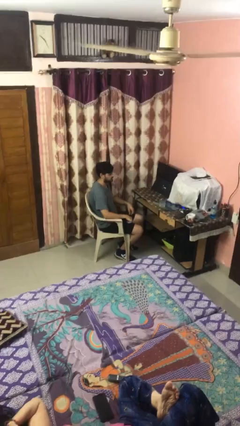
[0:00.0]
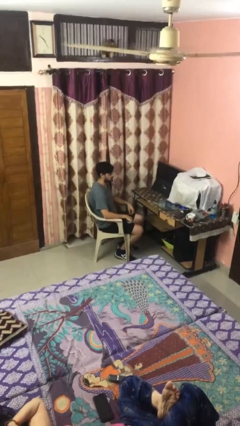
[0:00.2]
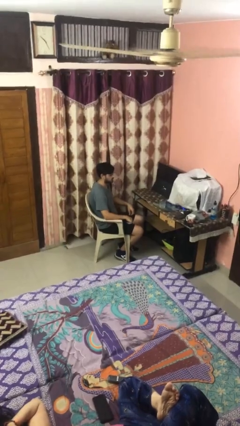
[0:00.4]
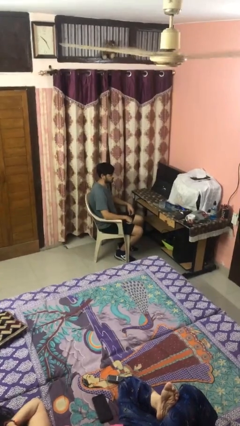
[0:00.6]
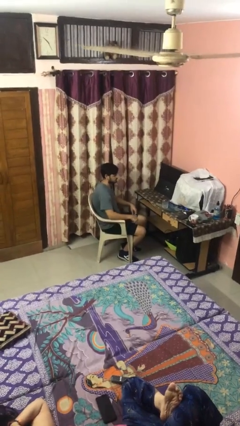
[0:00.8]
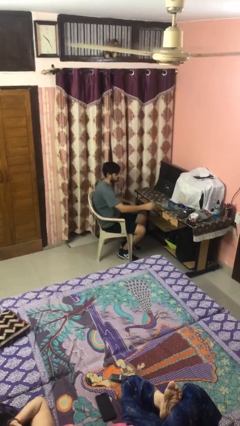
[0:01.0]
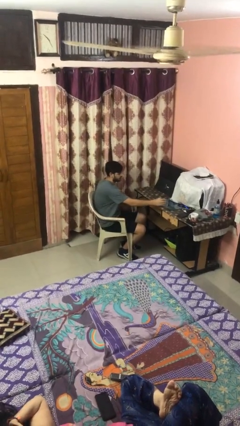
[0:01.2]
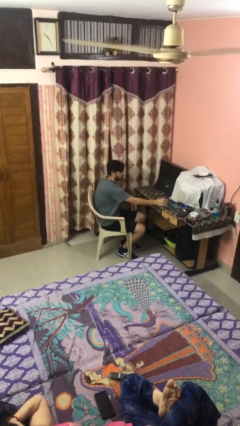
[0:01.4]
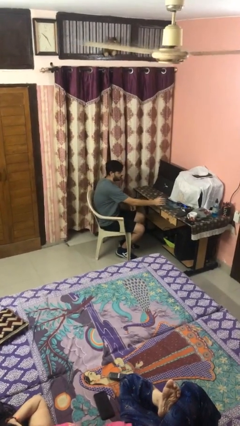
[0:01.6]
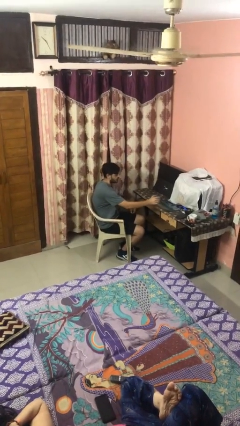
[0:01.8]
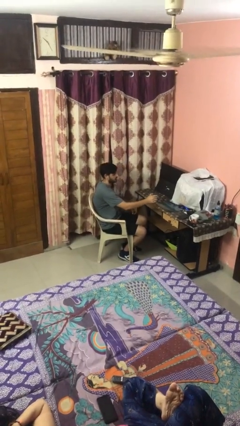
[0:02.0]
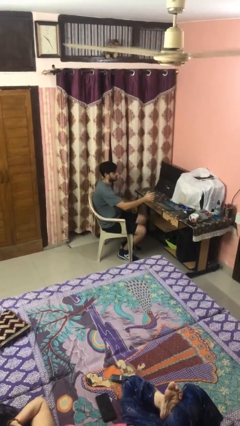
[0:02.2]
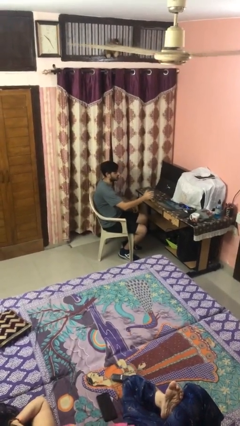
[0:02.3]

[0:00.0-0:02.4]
person picks up object from table

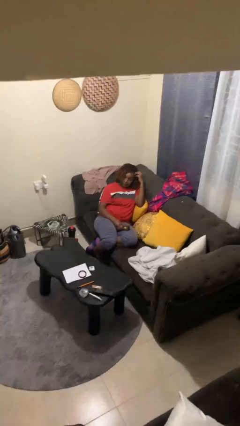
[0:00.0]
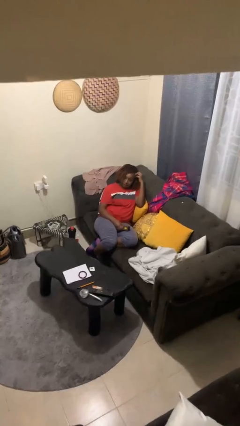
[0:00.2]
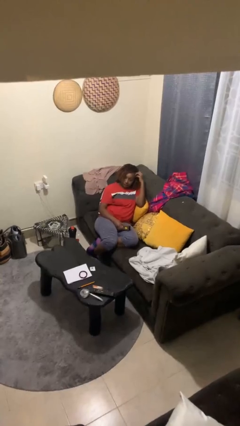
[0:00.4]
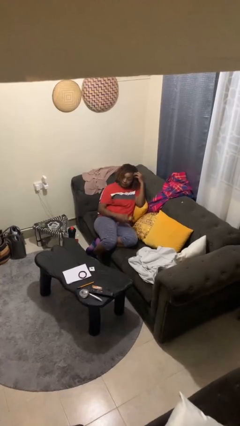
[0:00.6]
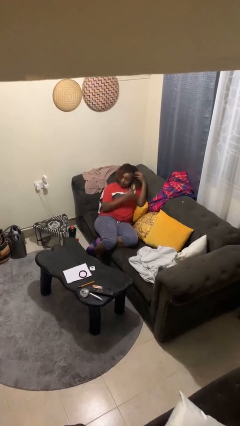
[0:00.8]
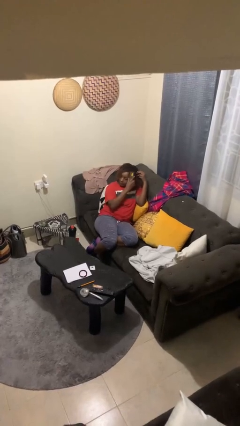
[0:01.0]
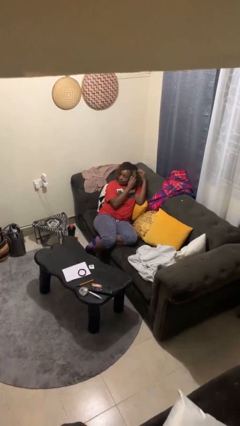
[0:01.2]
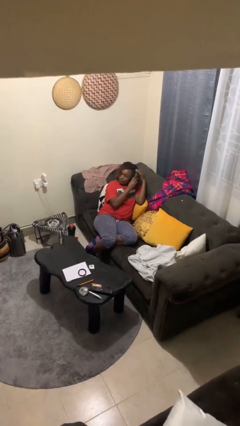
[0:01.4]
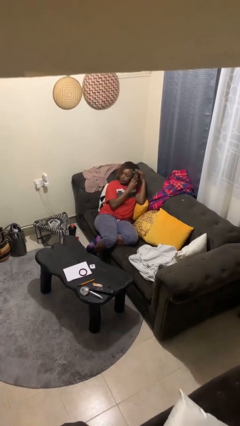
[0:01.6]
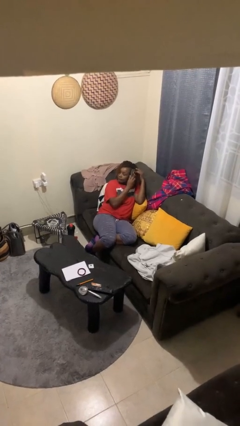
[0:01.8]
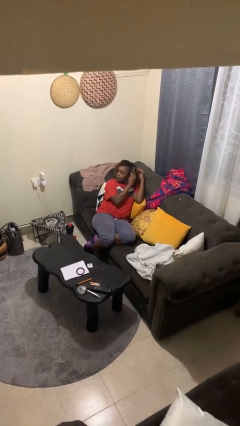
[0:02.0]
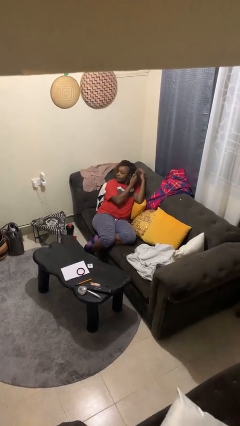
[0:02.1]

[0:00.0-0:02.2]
person brushes hair

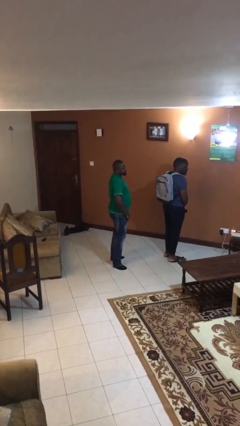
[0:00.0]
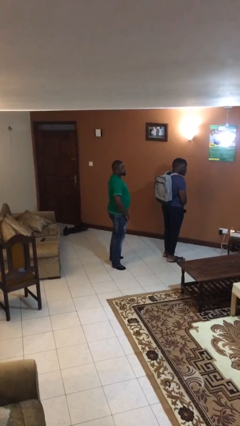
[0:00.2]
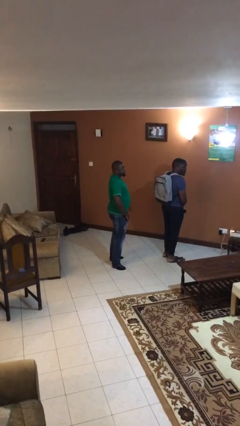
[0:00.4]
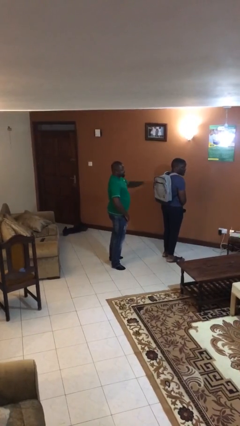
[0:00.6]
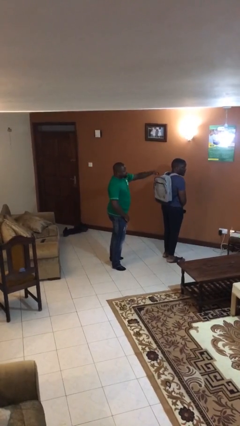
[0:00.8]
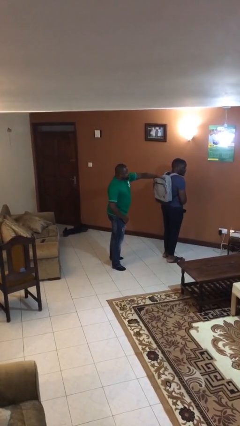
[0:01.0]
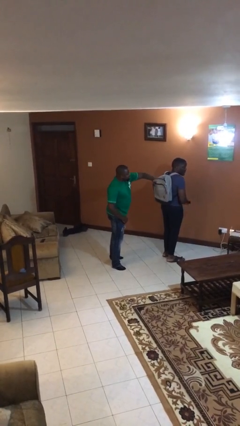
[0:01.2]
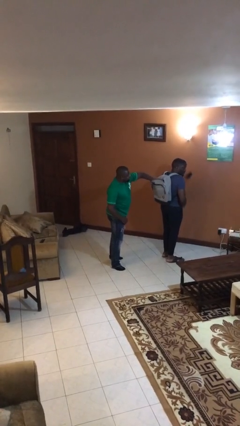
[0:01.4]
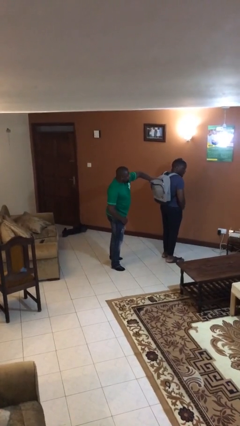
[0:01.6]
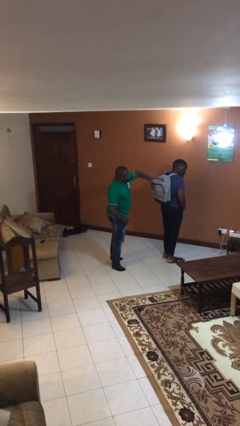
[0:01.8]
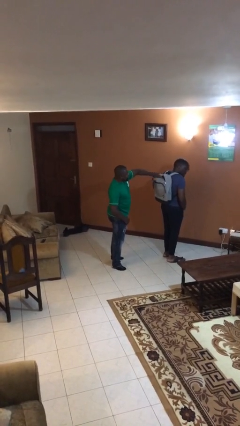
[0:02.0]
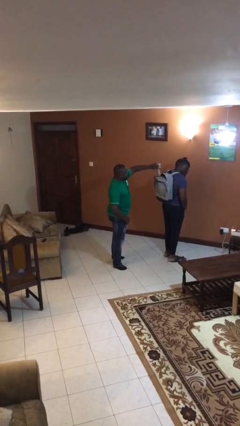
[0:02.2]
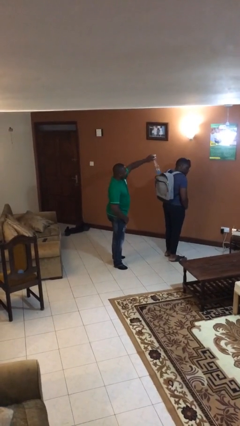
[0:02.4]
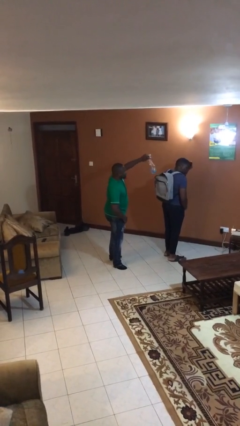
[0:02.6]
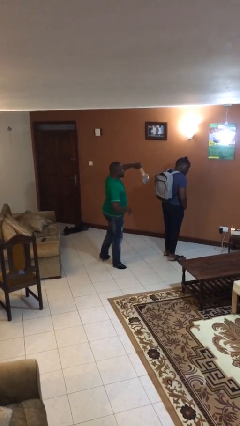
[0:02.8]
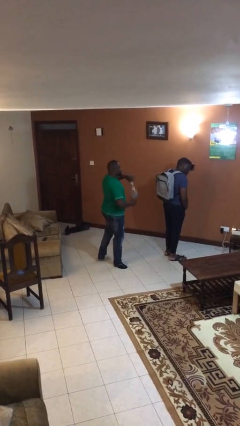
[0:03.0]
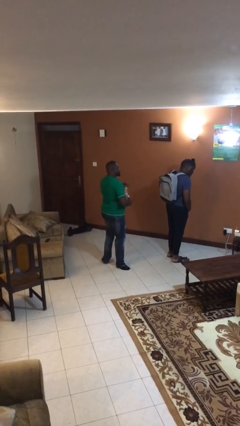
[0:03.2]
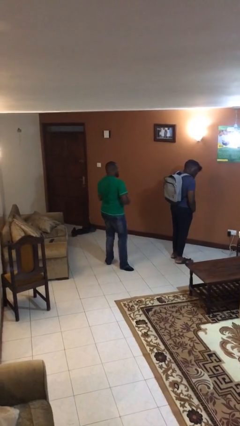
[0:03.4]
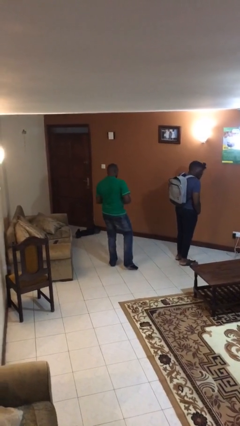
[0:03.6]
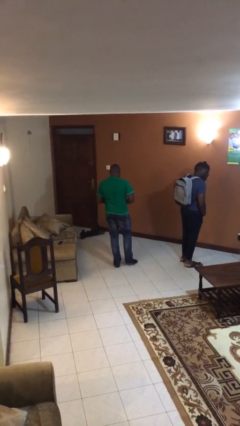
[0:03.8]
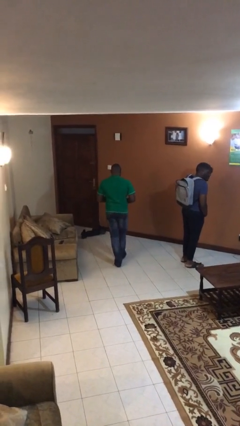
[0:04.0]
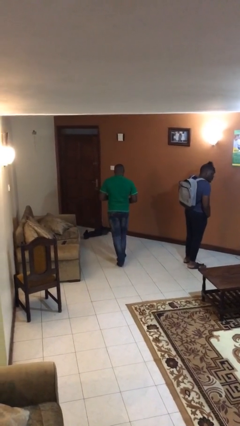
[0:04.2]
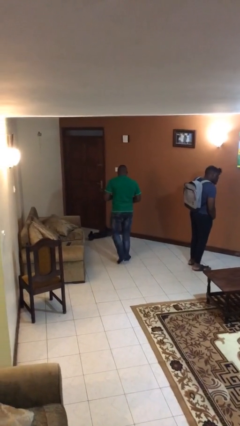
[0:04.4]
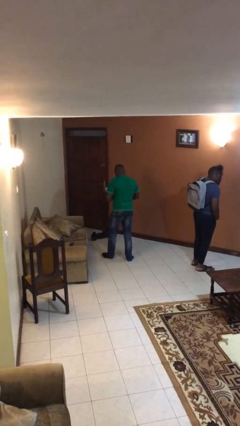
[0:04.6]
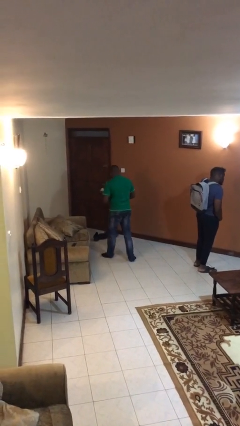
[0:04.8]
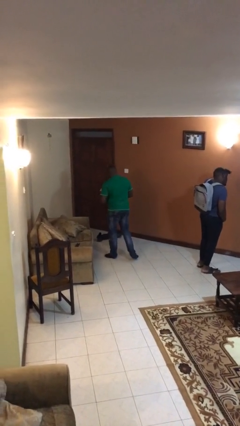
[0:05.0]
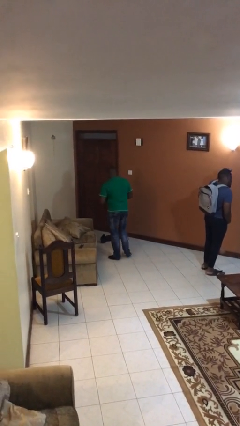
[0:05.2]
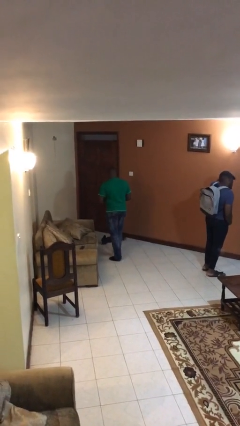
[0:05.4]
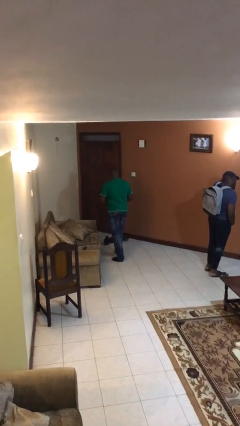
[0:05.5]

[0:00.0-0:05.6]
person steals object from person

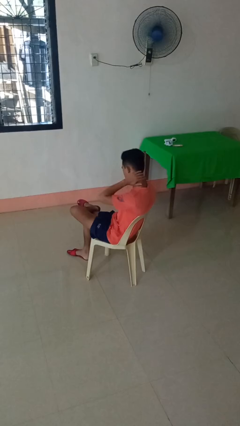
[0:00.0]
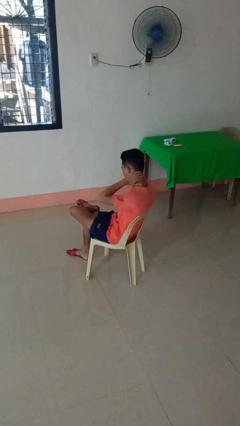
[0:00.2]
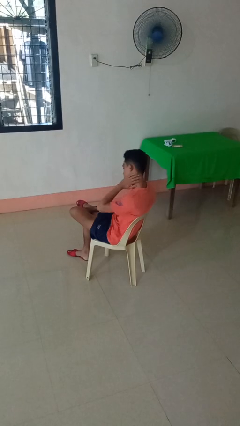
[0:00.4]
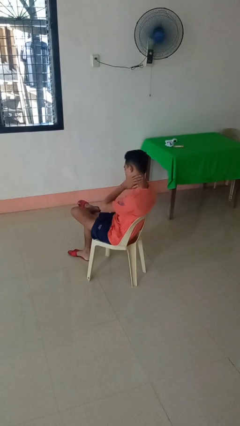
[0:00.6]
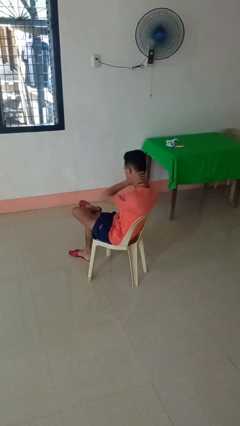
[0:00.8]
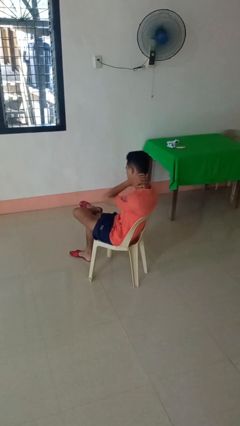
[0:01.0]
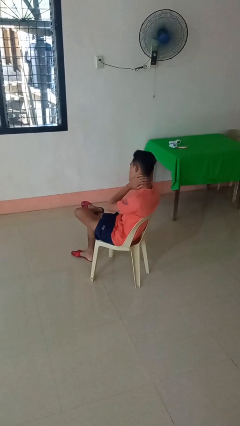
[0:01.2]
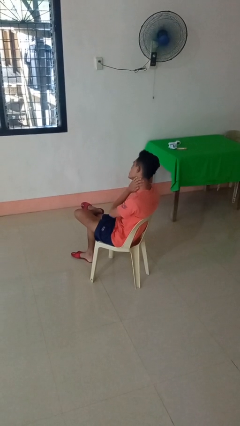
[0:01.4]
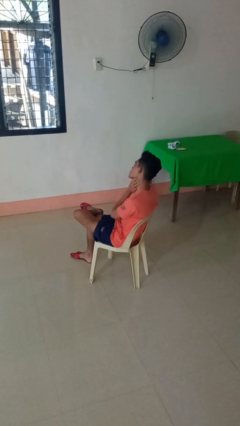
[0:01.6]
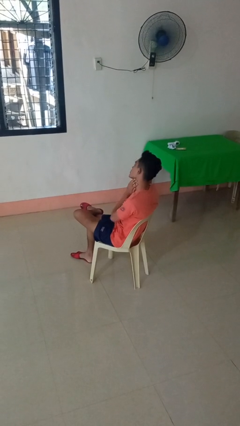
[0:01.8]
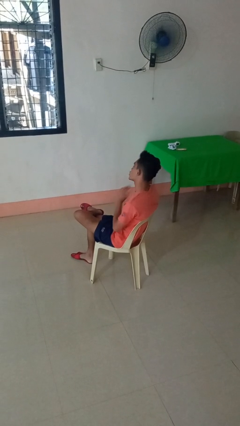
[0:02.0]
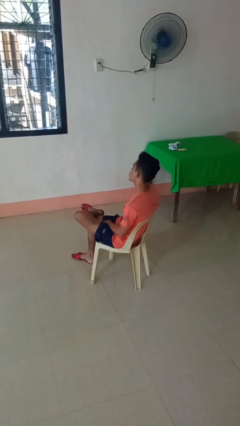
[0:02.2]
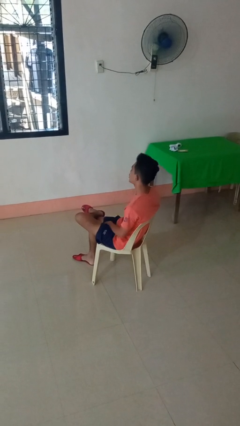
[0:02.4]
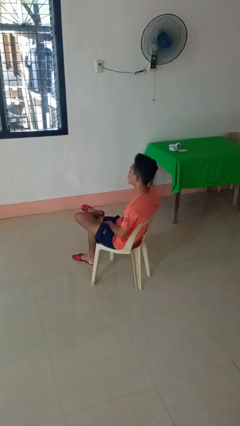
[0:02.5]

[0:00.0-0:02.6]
person rubs neck

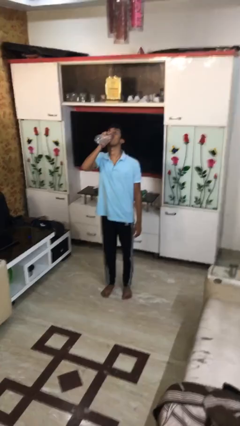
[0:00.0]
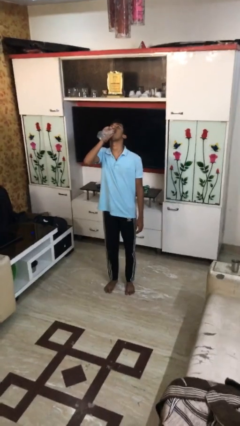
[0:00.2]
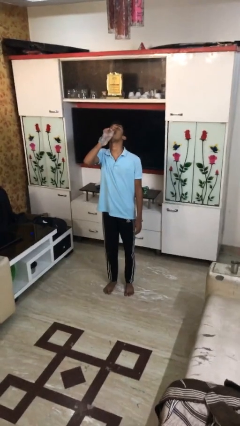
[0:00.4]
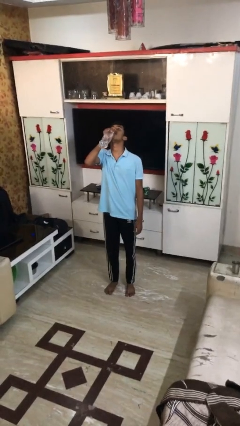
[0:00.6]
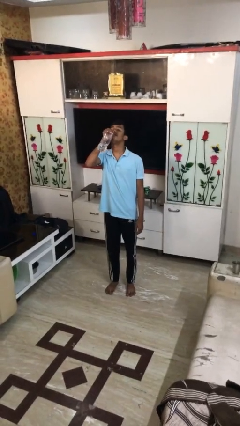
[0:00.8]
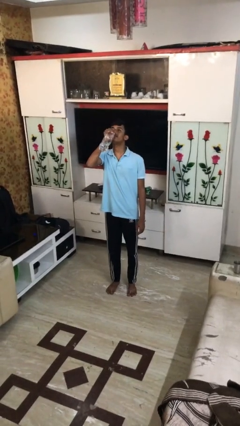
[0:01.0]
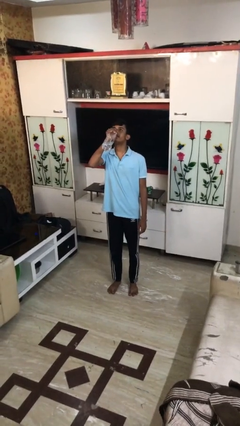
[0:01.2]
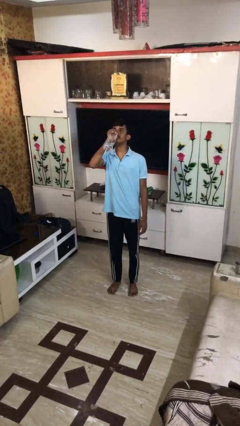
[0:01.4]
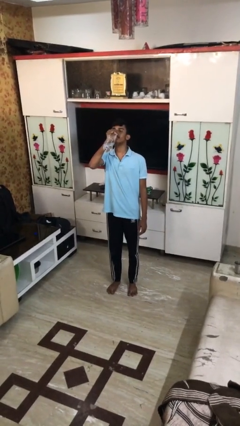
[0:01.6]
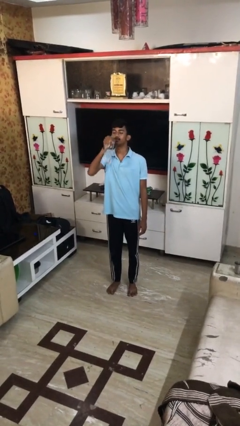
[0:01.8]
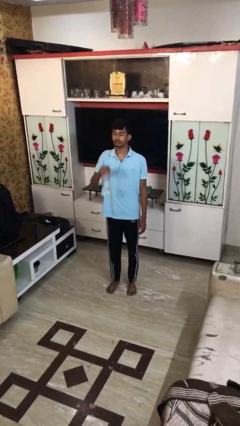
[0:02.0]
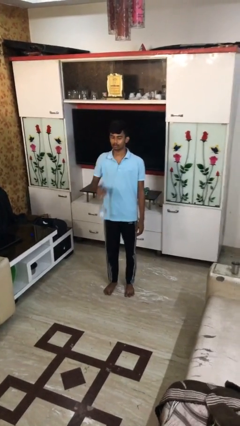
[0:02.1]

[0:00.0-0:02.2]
person drinks from bottle

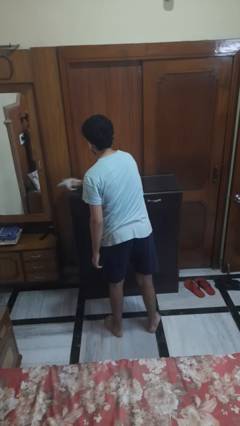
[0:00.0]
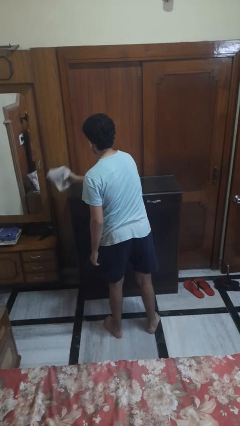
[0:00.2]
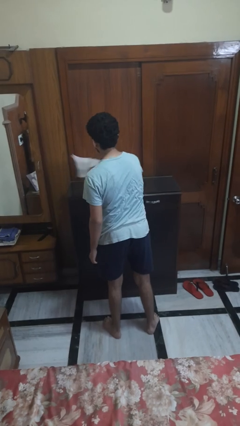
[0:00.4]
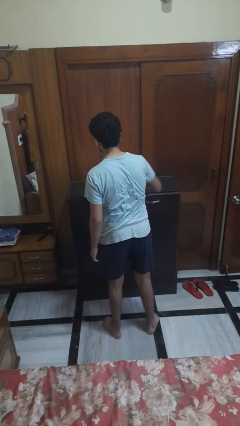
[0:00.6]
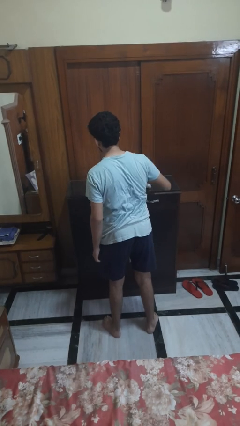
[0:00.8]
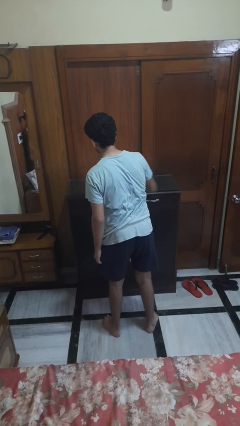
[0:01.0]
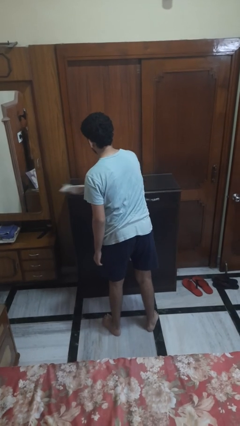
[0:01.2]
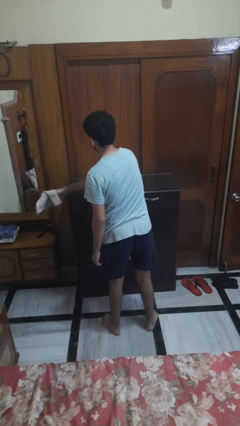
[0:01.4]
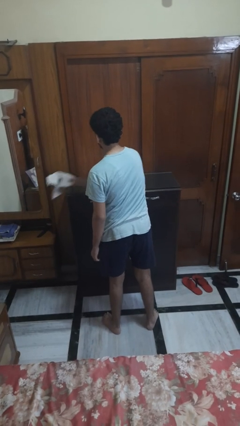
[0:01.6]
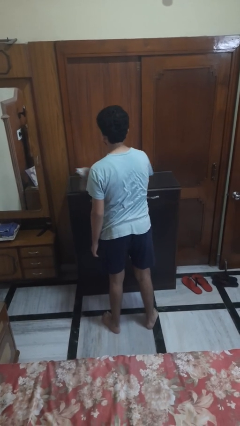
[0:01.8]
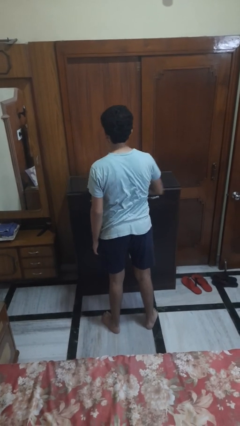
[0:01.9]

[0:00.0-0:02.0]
person cleans table with rag

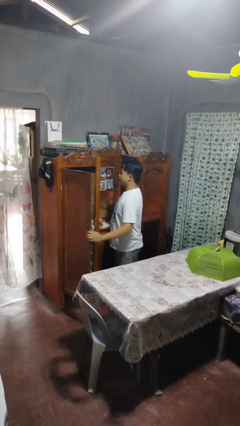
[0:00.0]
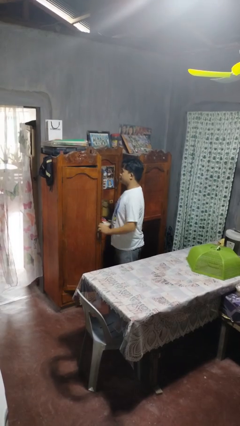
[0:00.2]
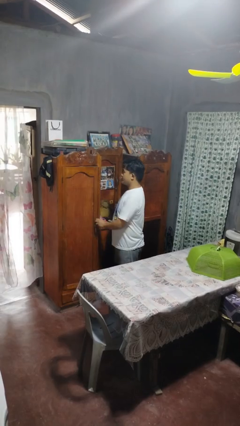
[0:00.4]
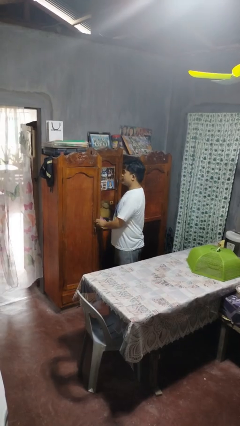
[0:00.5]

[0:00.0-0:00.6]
person closes closet door
